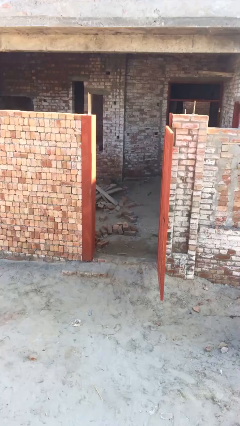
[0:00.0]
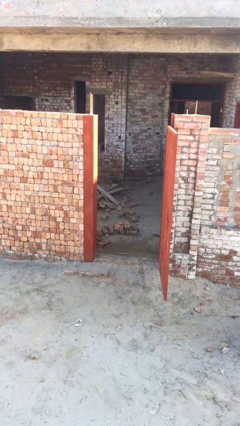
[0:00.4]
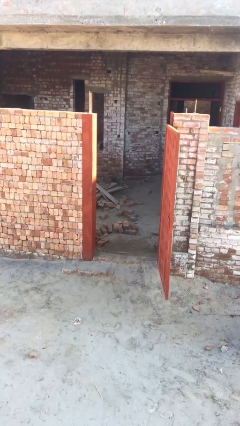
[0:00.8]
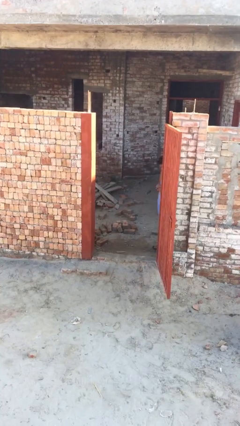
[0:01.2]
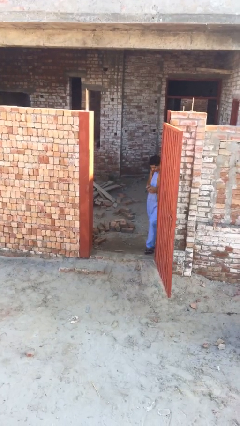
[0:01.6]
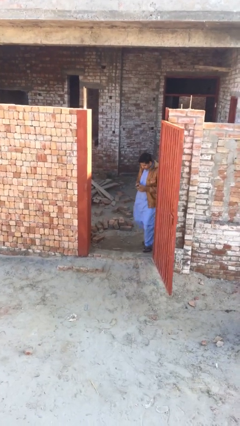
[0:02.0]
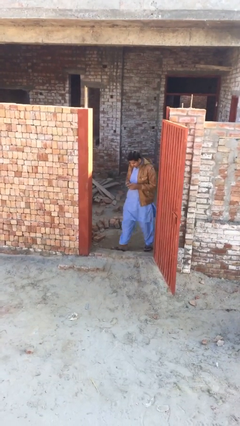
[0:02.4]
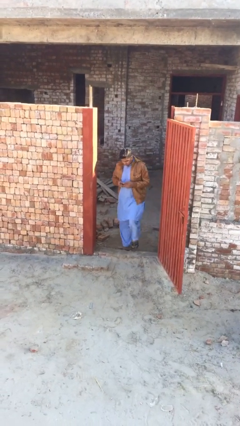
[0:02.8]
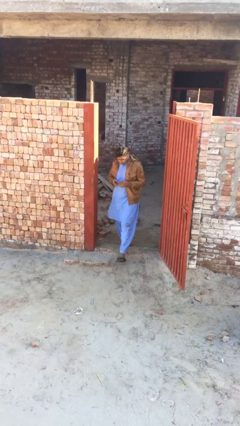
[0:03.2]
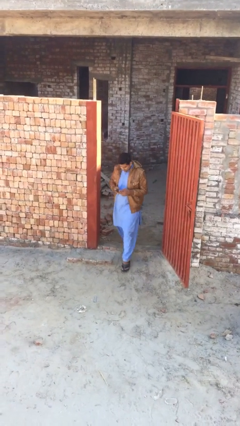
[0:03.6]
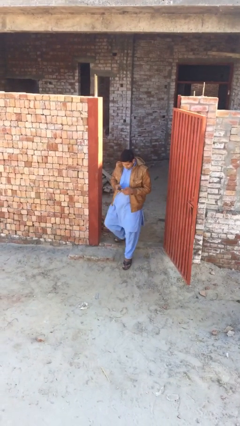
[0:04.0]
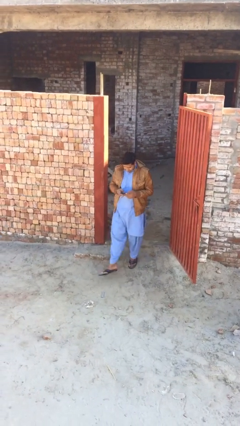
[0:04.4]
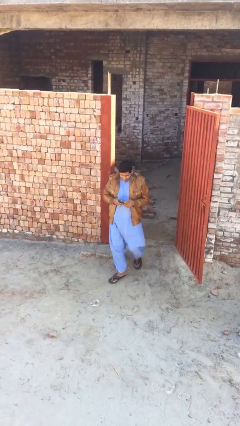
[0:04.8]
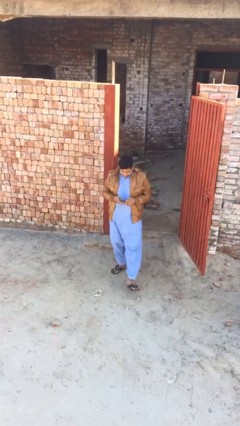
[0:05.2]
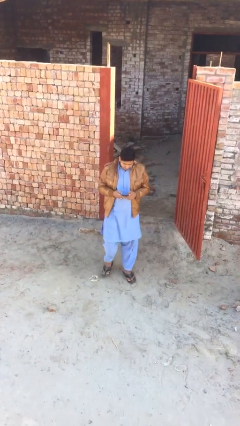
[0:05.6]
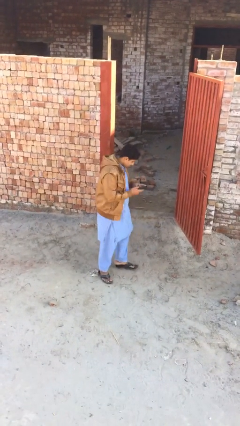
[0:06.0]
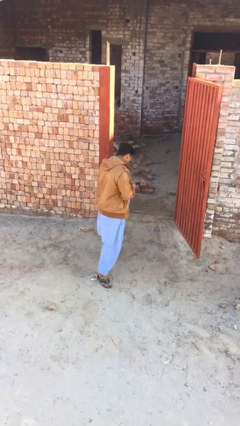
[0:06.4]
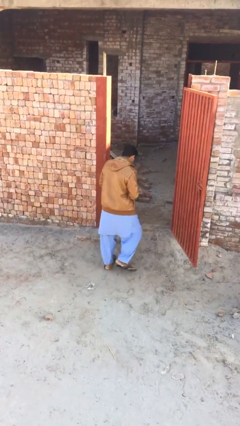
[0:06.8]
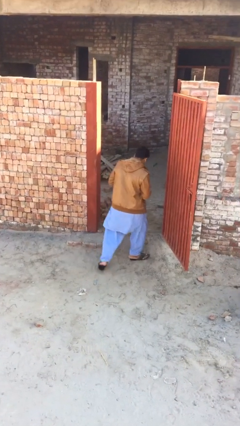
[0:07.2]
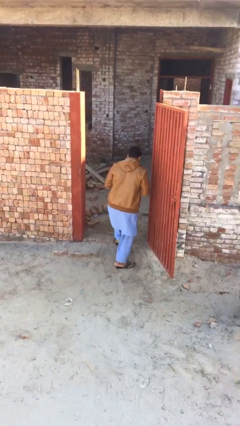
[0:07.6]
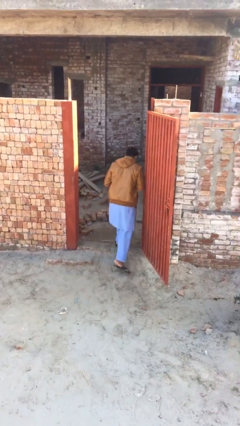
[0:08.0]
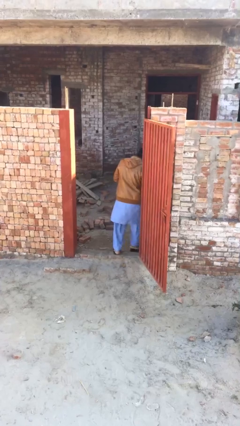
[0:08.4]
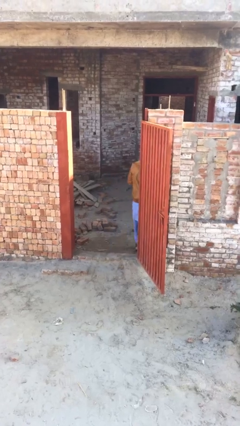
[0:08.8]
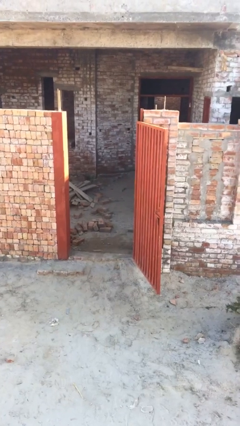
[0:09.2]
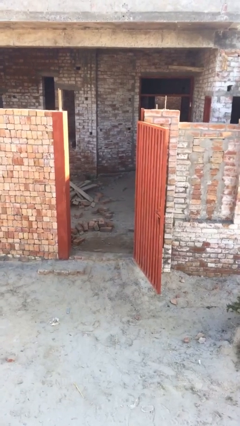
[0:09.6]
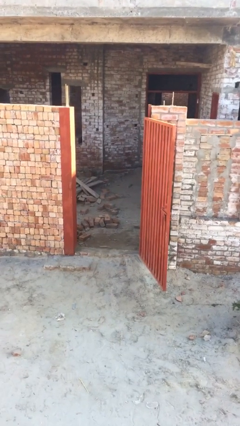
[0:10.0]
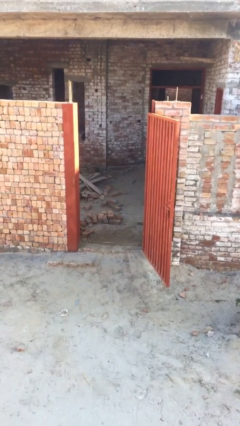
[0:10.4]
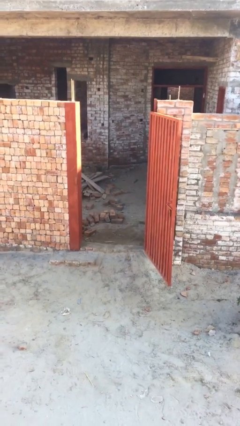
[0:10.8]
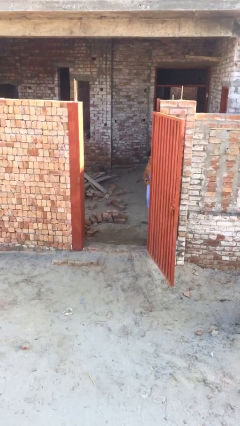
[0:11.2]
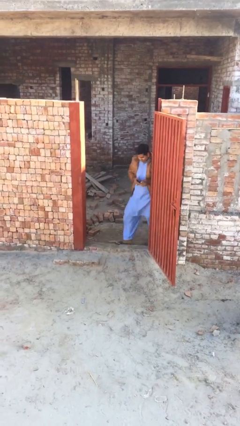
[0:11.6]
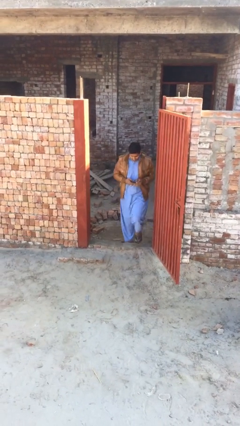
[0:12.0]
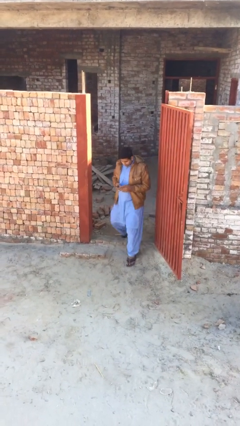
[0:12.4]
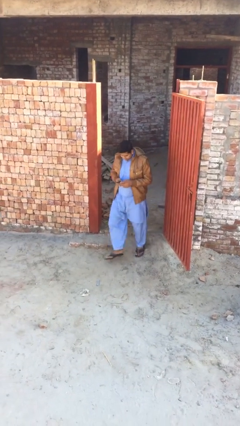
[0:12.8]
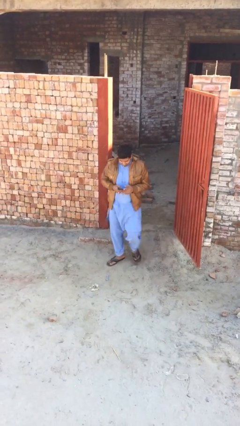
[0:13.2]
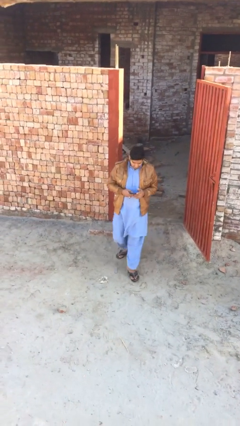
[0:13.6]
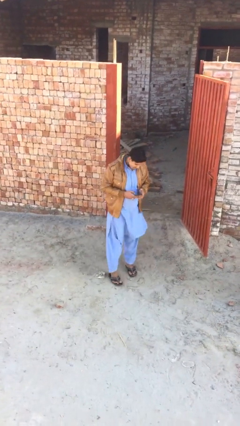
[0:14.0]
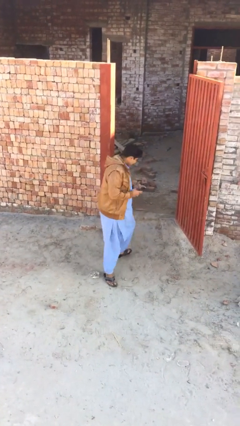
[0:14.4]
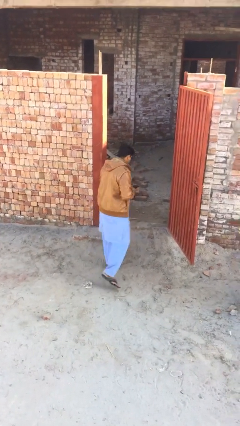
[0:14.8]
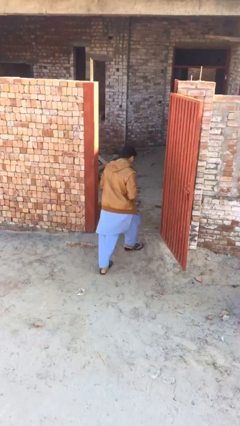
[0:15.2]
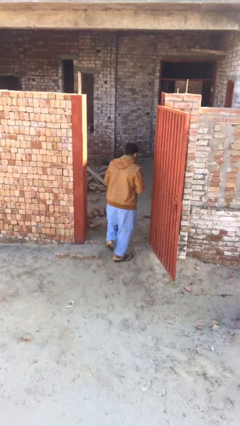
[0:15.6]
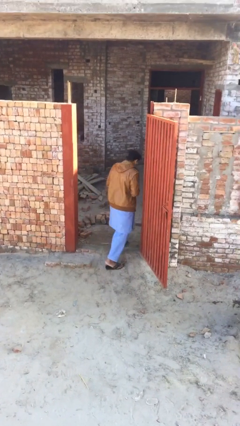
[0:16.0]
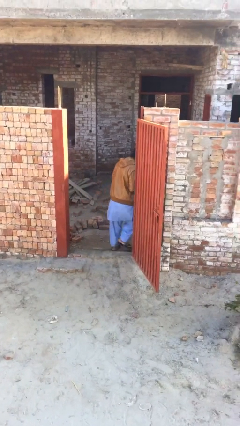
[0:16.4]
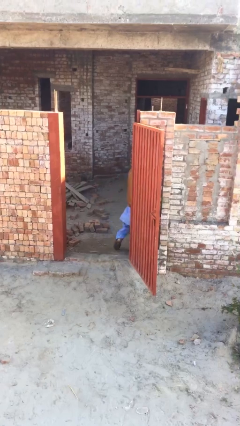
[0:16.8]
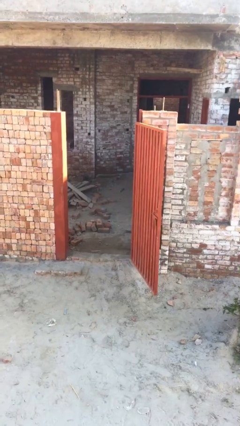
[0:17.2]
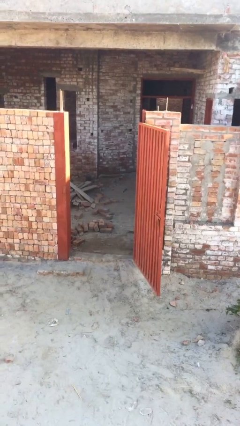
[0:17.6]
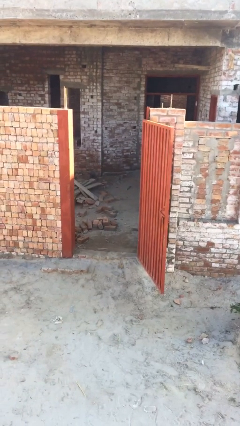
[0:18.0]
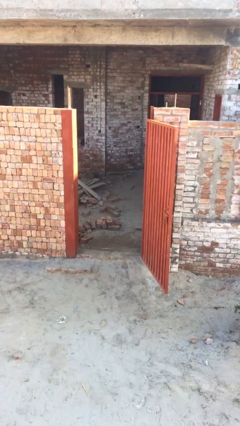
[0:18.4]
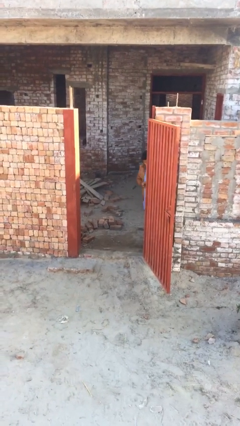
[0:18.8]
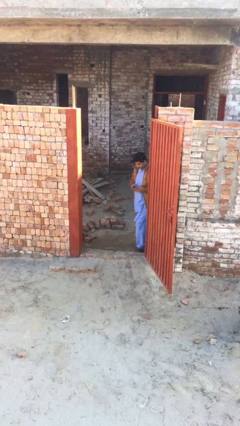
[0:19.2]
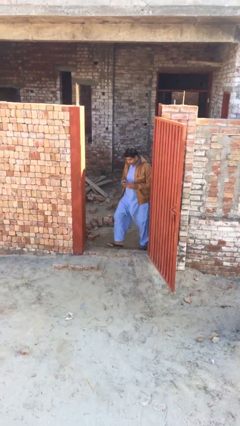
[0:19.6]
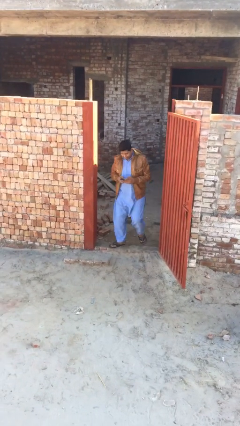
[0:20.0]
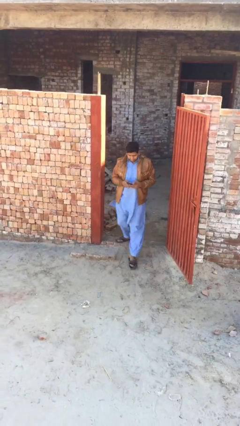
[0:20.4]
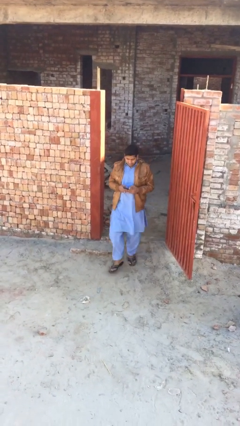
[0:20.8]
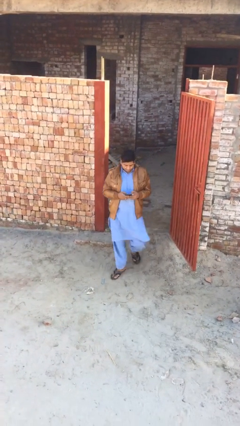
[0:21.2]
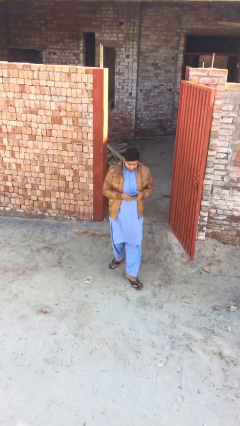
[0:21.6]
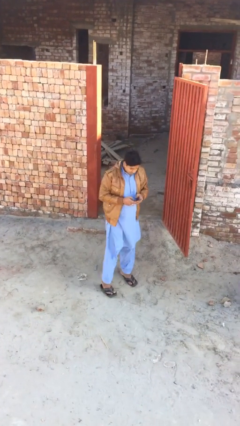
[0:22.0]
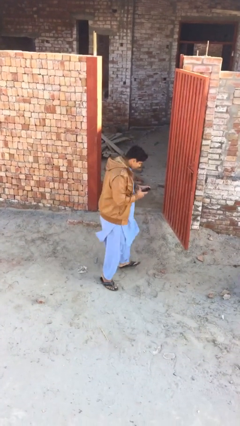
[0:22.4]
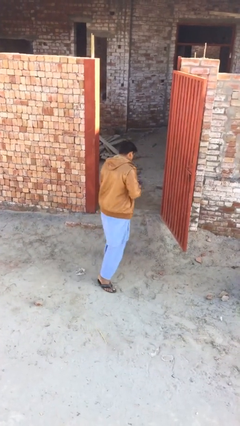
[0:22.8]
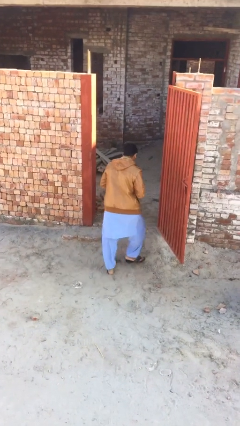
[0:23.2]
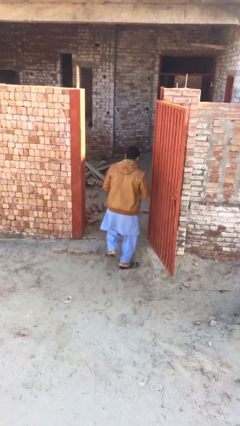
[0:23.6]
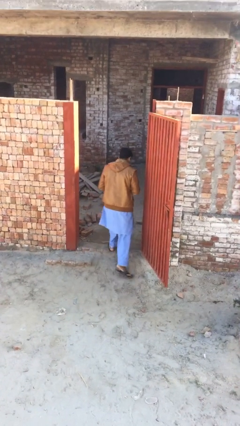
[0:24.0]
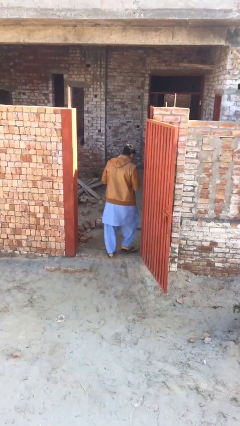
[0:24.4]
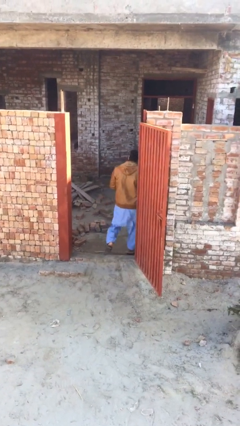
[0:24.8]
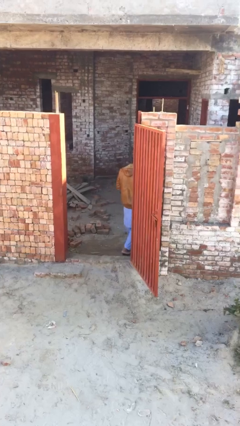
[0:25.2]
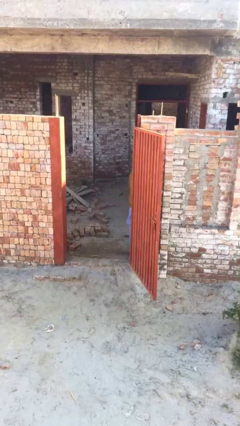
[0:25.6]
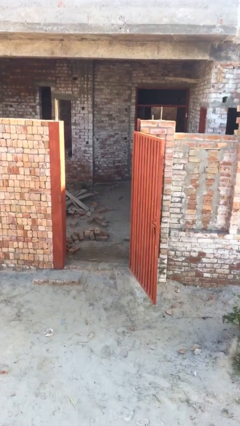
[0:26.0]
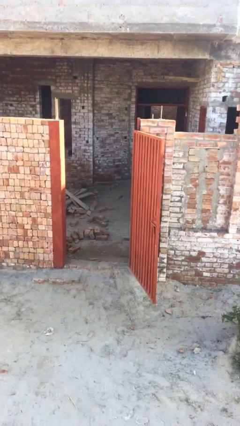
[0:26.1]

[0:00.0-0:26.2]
person texts on phone

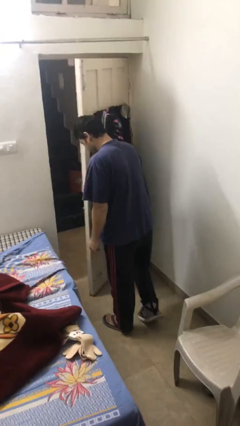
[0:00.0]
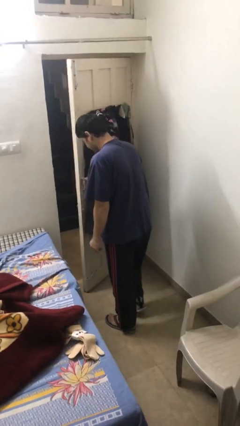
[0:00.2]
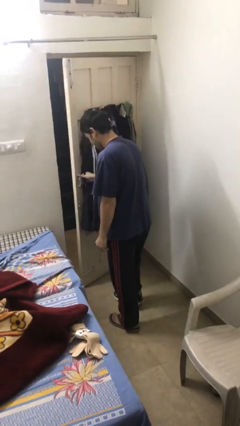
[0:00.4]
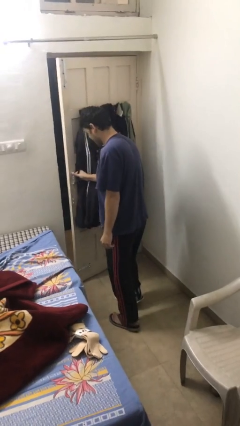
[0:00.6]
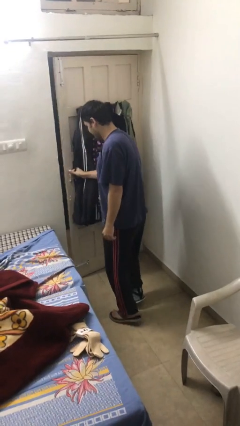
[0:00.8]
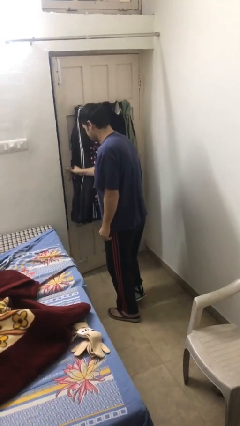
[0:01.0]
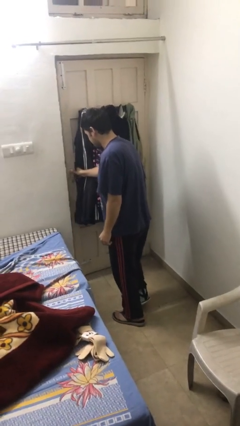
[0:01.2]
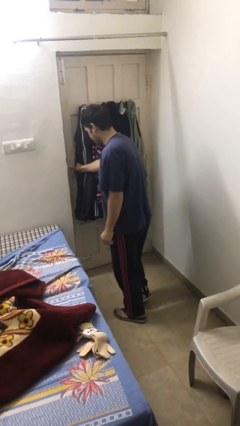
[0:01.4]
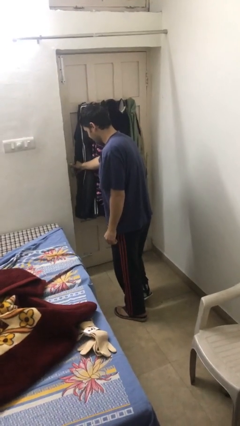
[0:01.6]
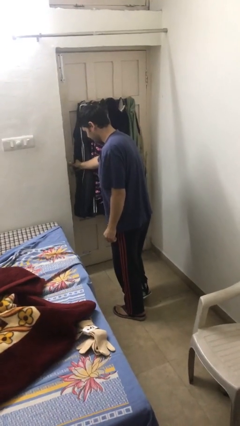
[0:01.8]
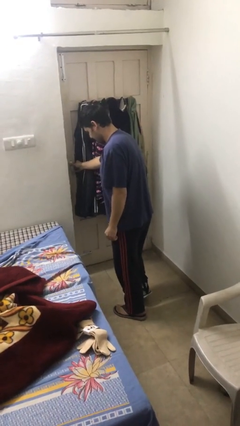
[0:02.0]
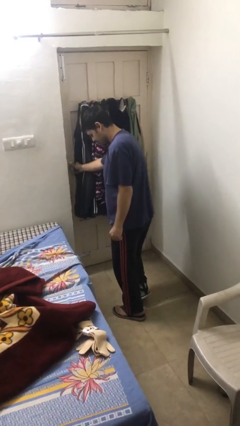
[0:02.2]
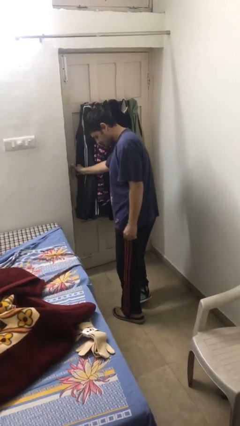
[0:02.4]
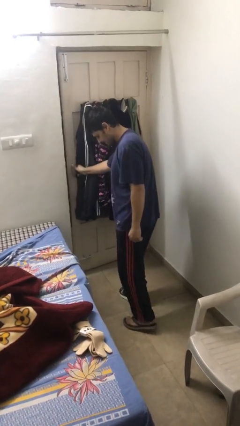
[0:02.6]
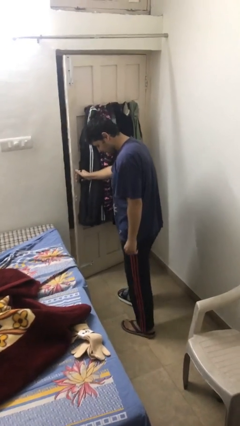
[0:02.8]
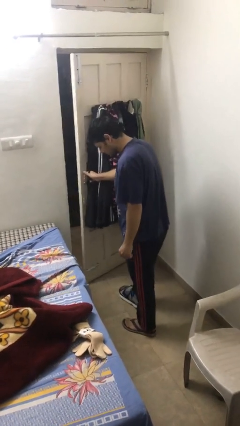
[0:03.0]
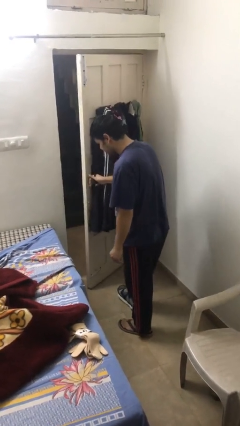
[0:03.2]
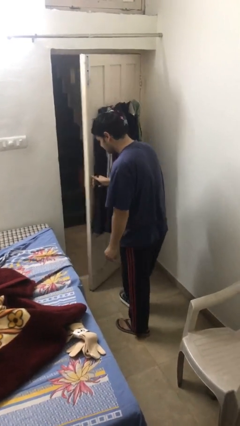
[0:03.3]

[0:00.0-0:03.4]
person closes facility door

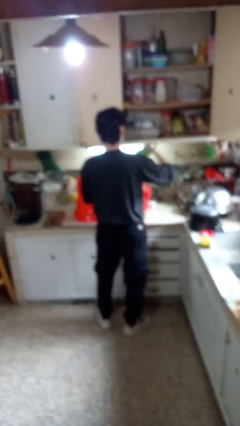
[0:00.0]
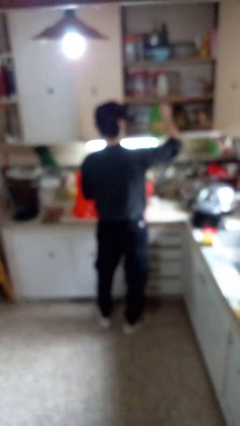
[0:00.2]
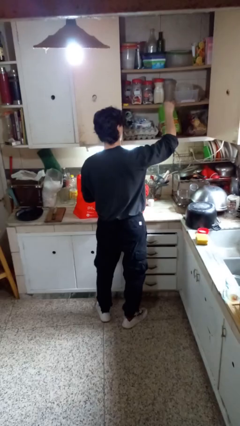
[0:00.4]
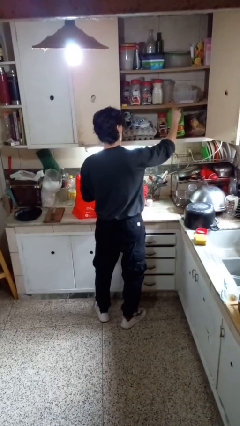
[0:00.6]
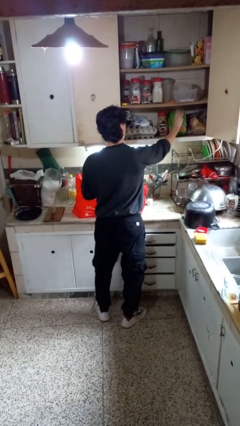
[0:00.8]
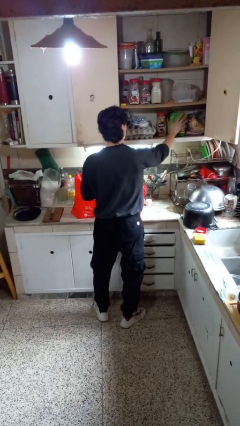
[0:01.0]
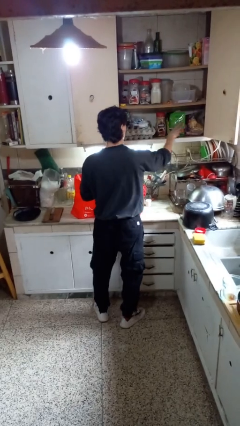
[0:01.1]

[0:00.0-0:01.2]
person loads groceries into cabinet
